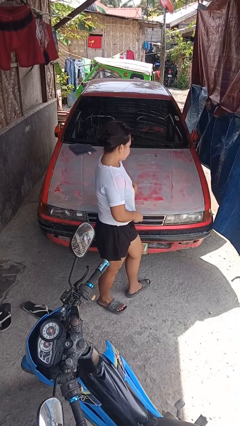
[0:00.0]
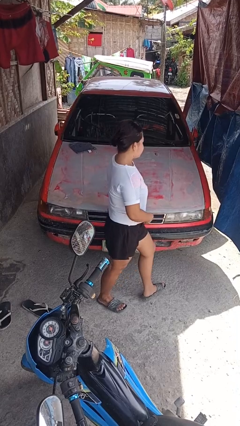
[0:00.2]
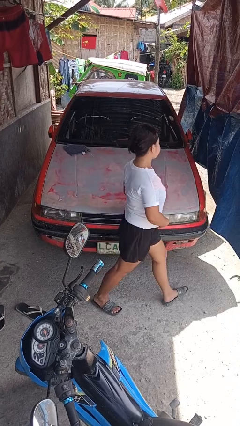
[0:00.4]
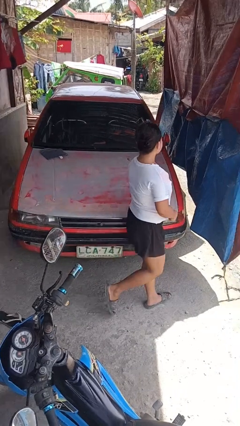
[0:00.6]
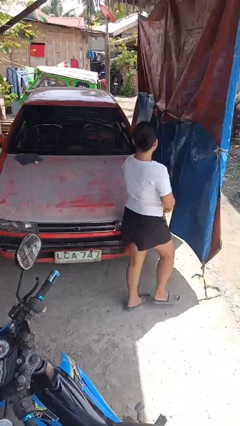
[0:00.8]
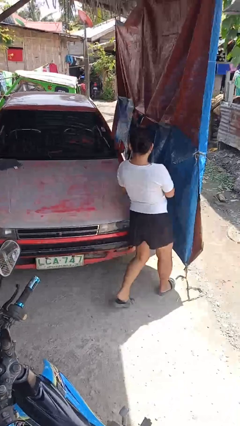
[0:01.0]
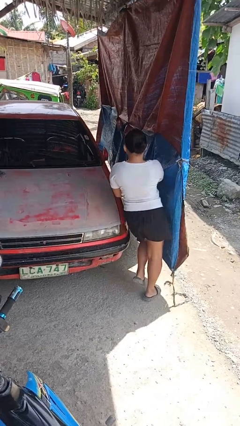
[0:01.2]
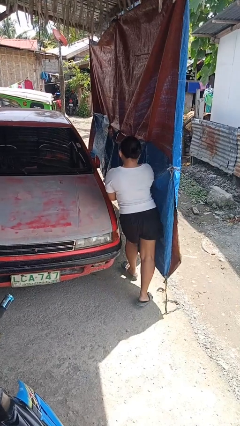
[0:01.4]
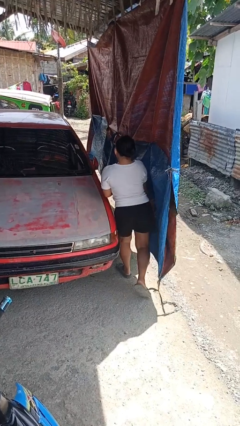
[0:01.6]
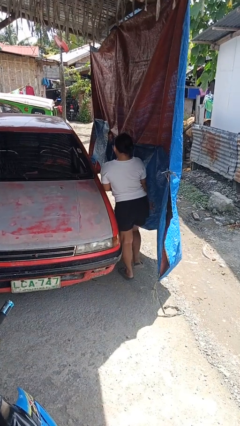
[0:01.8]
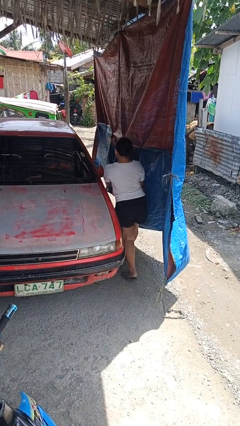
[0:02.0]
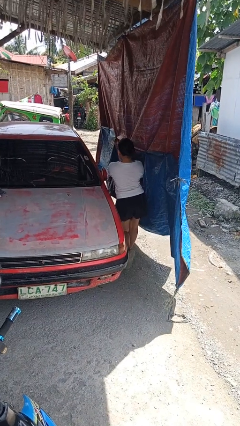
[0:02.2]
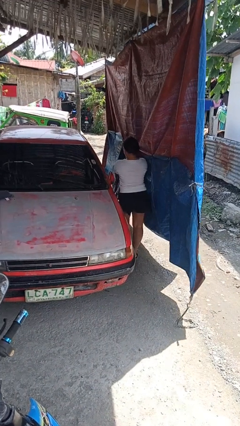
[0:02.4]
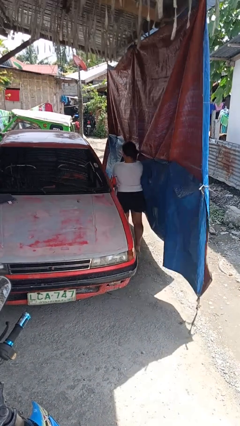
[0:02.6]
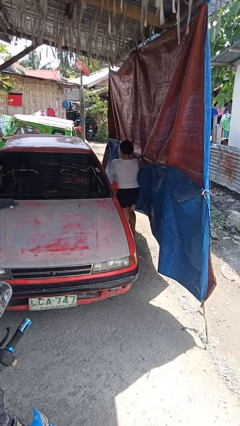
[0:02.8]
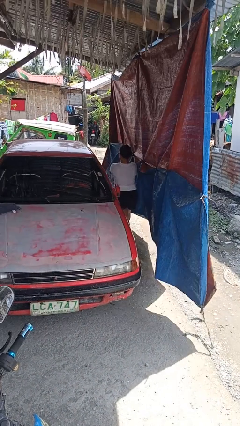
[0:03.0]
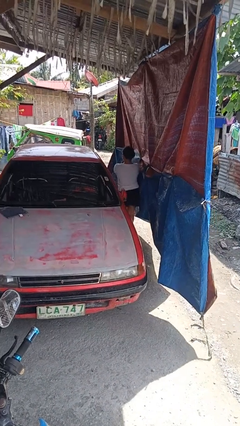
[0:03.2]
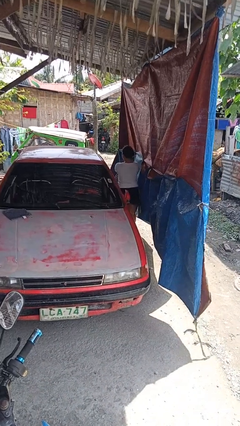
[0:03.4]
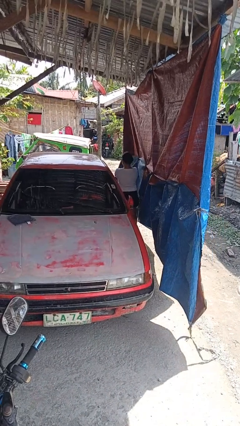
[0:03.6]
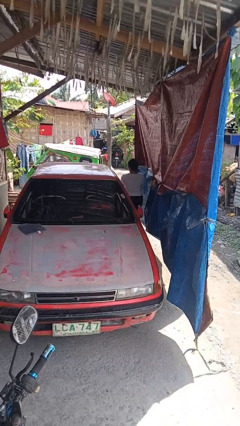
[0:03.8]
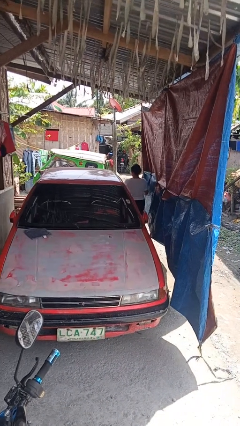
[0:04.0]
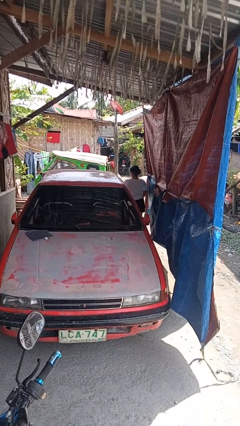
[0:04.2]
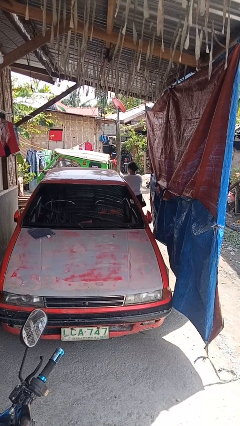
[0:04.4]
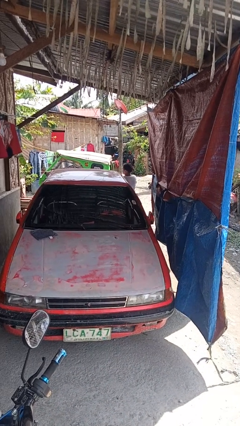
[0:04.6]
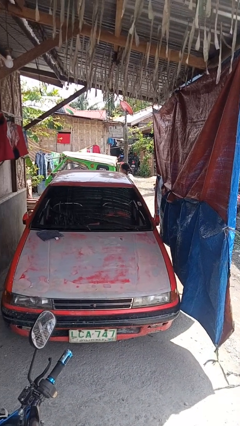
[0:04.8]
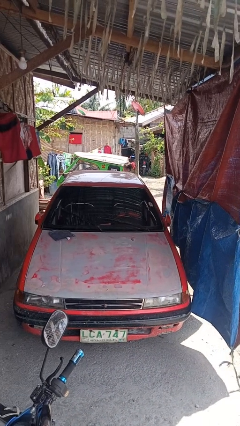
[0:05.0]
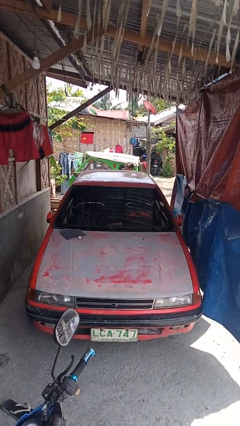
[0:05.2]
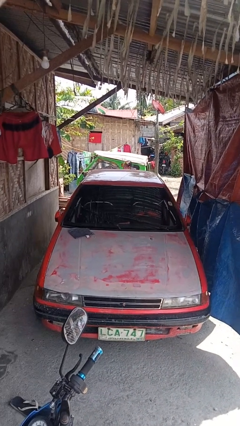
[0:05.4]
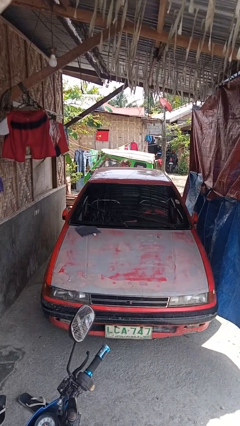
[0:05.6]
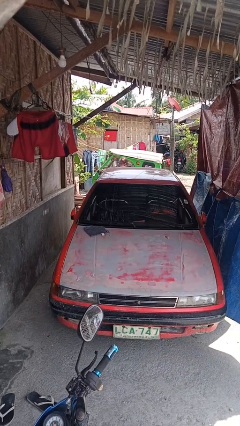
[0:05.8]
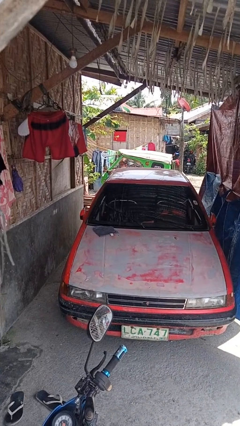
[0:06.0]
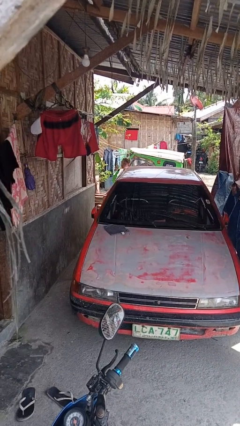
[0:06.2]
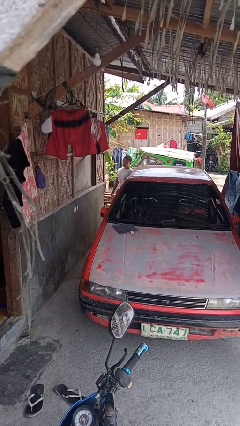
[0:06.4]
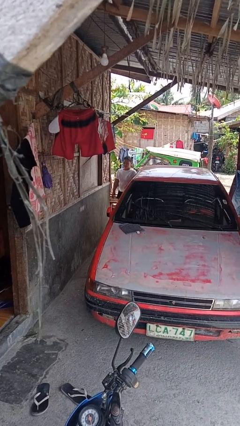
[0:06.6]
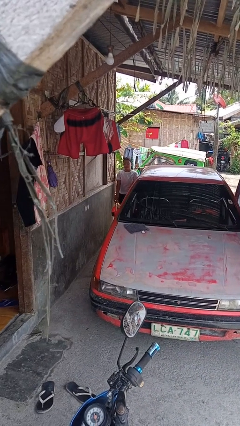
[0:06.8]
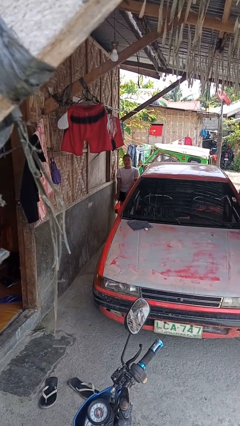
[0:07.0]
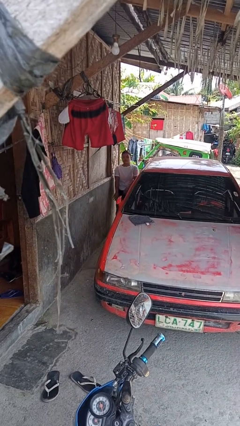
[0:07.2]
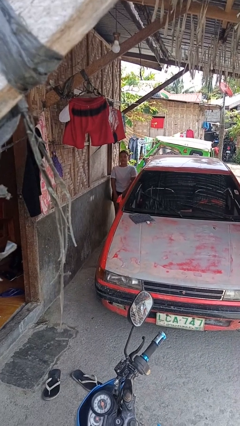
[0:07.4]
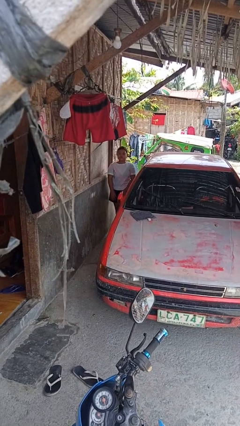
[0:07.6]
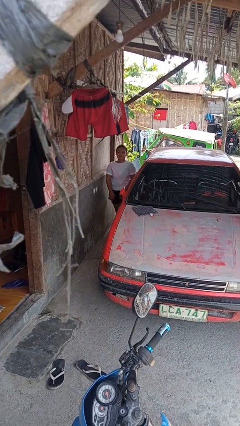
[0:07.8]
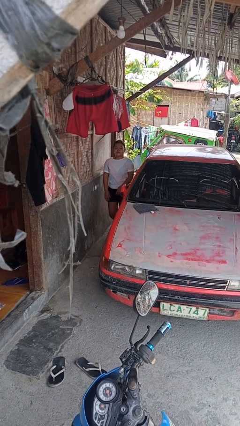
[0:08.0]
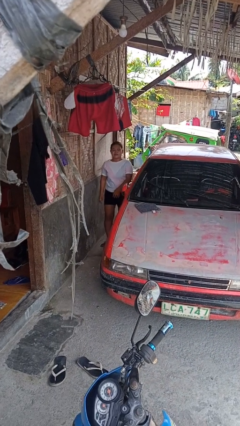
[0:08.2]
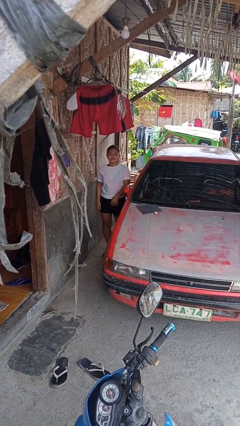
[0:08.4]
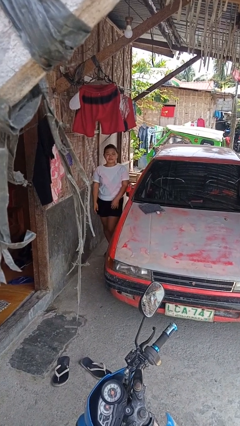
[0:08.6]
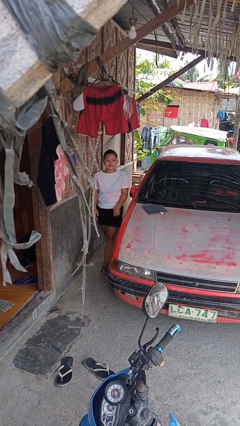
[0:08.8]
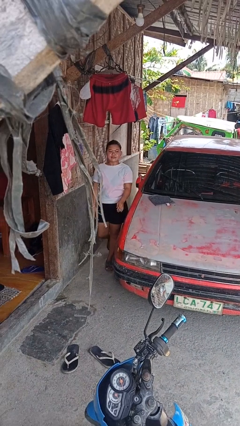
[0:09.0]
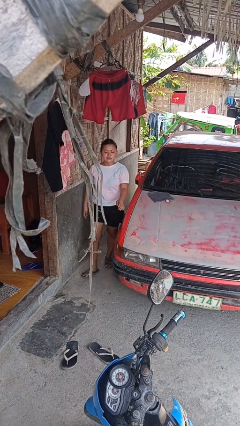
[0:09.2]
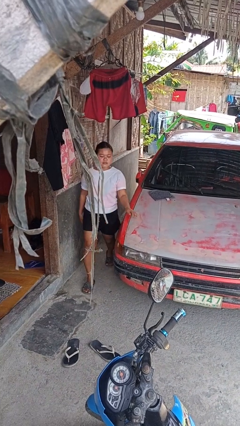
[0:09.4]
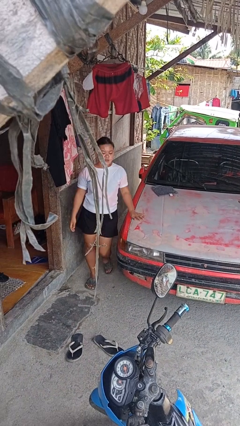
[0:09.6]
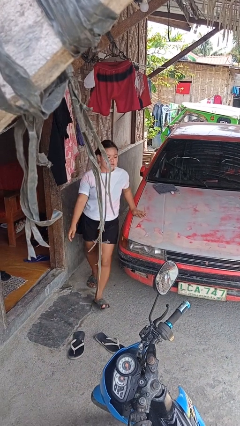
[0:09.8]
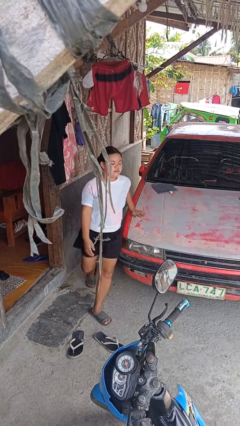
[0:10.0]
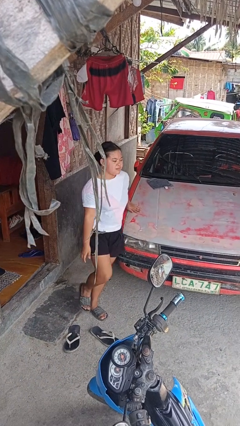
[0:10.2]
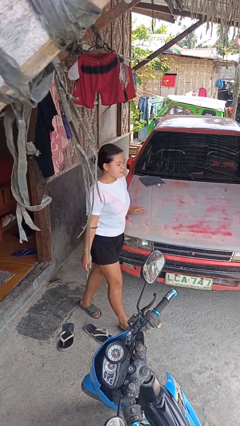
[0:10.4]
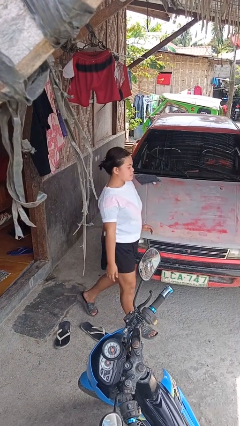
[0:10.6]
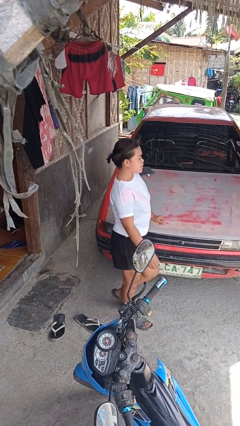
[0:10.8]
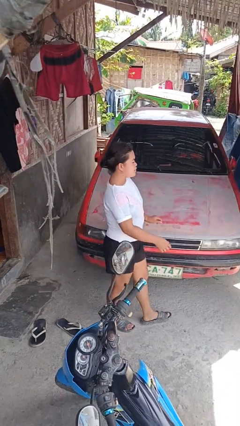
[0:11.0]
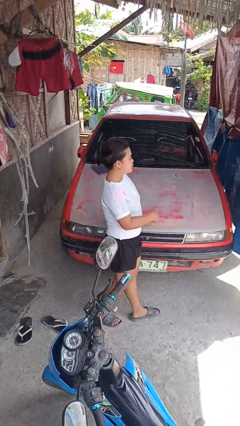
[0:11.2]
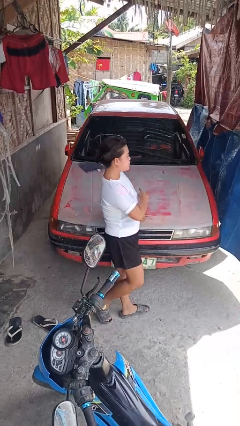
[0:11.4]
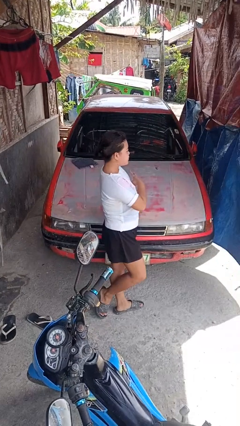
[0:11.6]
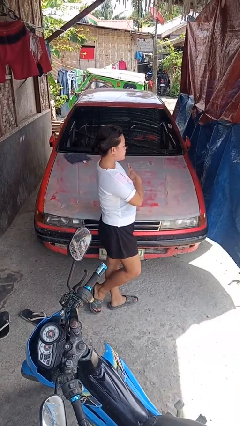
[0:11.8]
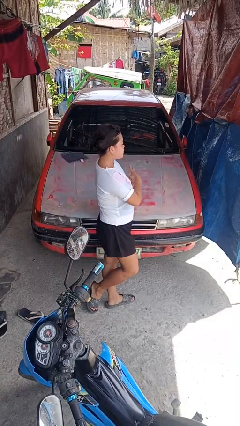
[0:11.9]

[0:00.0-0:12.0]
person walks around car

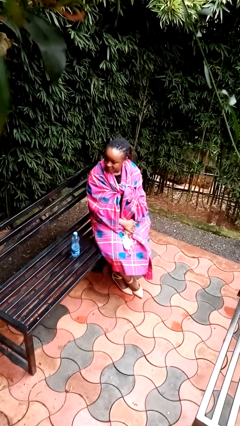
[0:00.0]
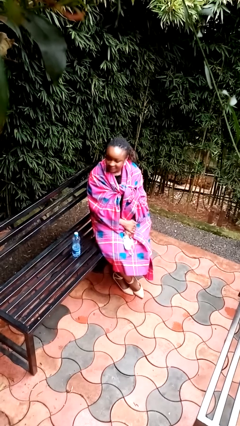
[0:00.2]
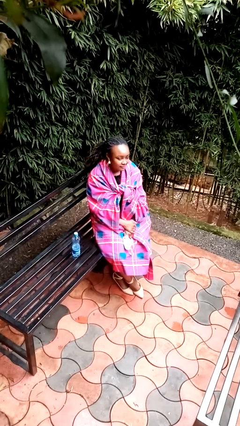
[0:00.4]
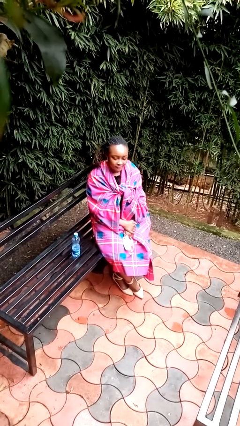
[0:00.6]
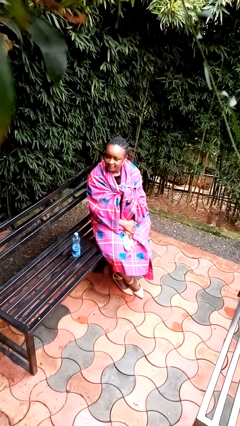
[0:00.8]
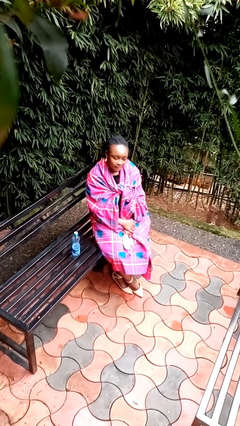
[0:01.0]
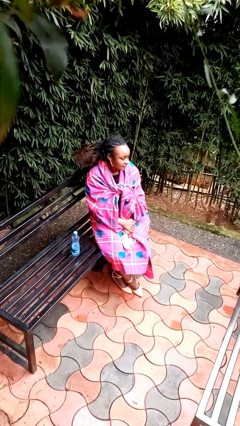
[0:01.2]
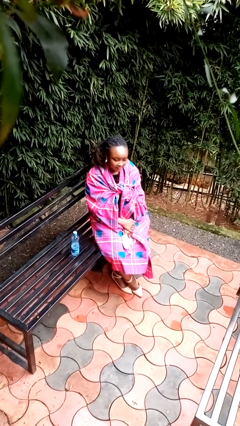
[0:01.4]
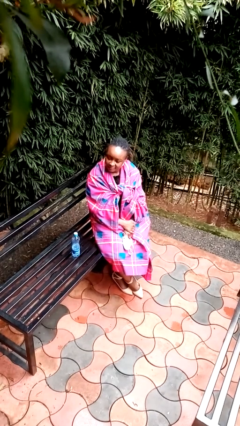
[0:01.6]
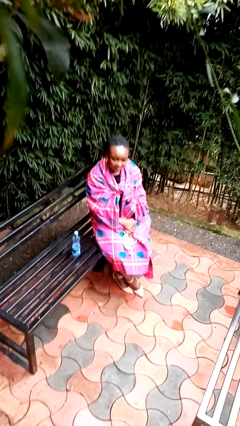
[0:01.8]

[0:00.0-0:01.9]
person shakes head

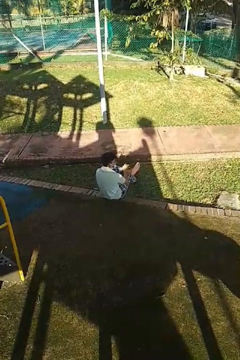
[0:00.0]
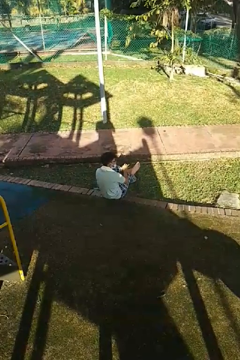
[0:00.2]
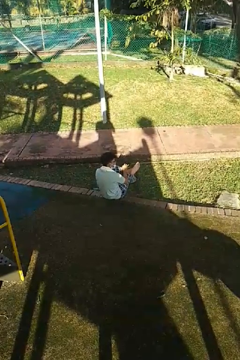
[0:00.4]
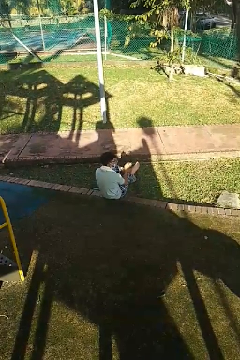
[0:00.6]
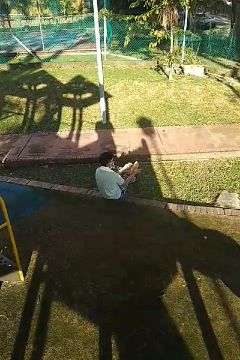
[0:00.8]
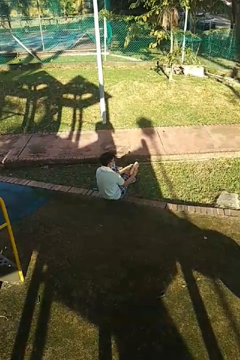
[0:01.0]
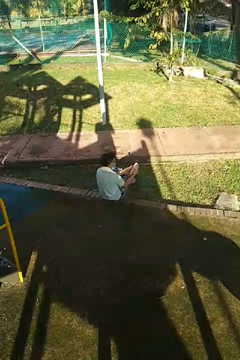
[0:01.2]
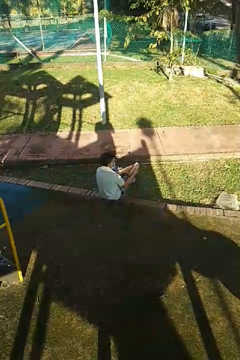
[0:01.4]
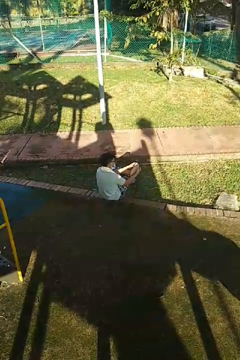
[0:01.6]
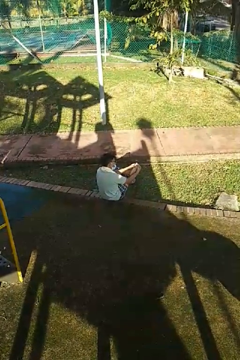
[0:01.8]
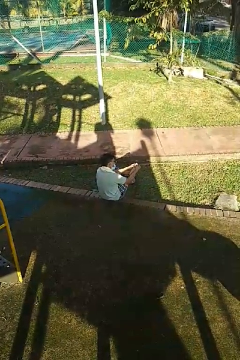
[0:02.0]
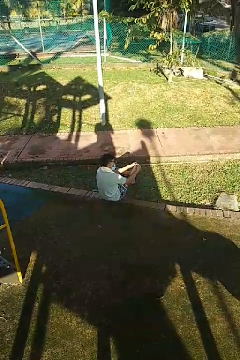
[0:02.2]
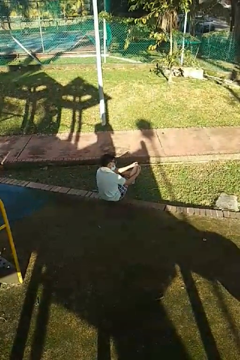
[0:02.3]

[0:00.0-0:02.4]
person rubs foot

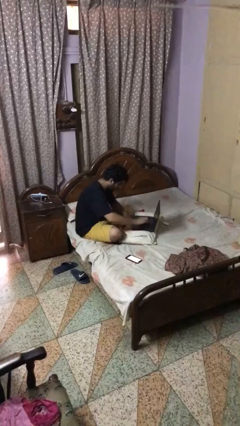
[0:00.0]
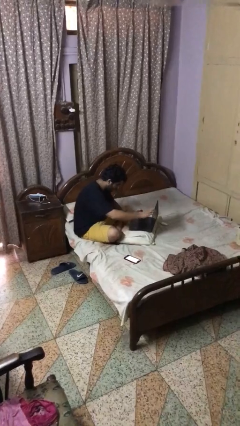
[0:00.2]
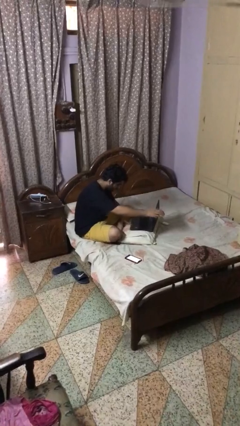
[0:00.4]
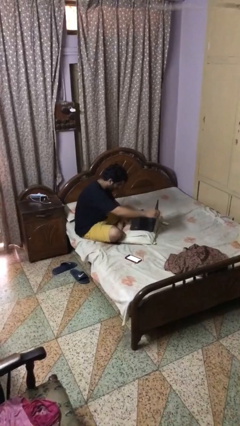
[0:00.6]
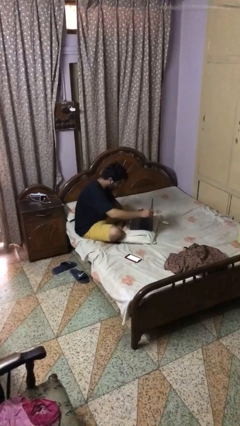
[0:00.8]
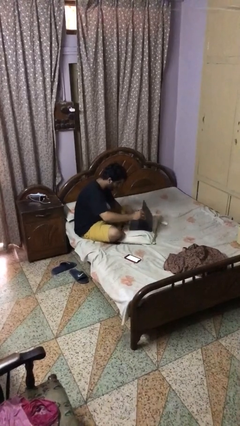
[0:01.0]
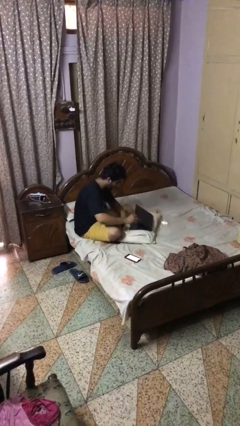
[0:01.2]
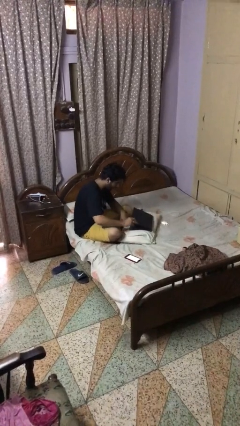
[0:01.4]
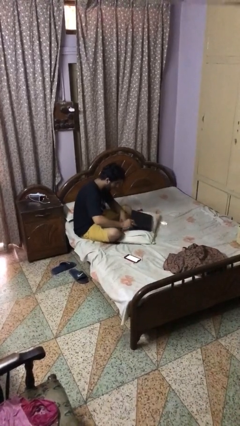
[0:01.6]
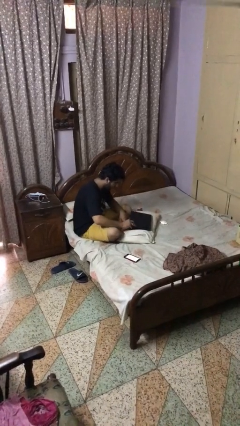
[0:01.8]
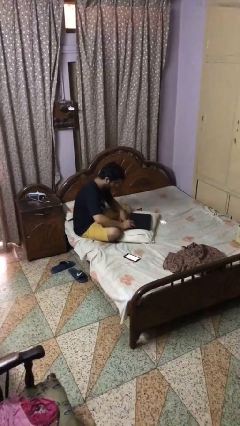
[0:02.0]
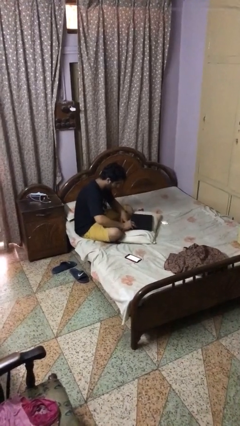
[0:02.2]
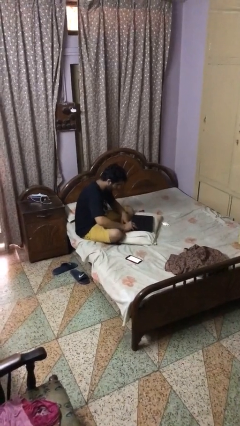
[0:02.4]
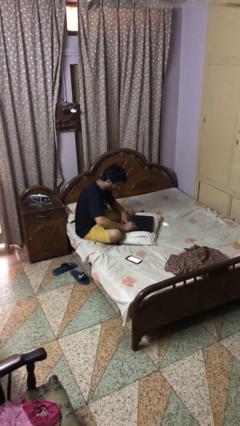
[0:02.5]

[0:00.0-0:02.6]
person closes laptop
